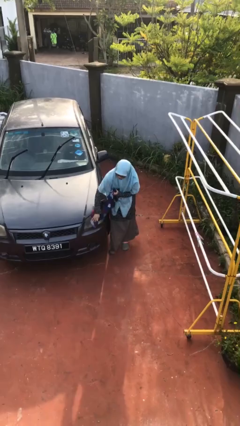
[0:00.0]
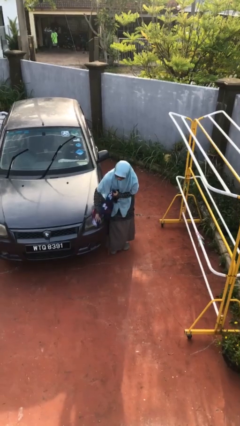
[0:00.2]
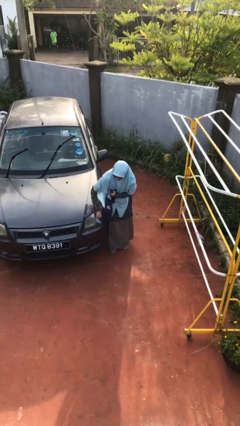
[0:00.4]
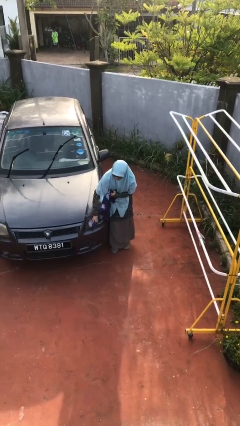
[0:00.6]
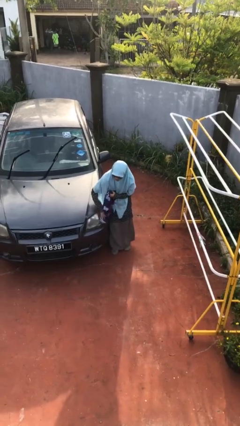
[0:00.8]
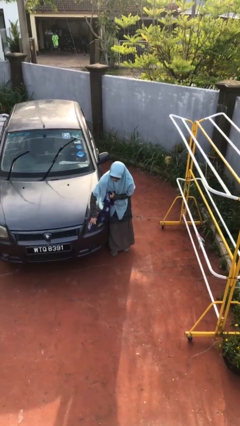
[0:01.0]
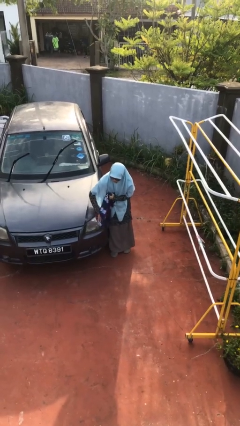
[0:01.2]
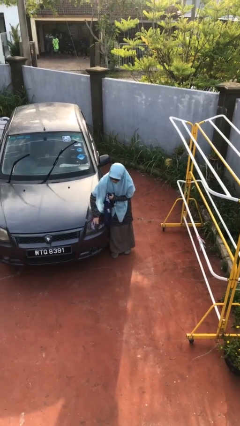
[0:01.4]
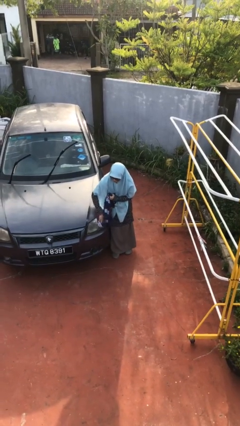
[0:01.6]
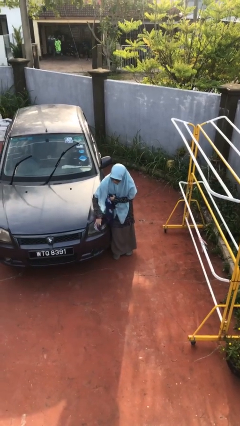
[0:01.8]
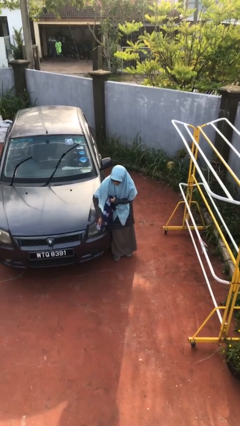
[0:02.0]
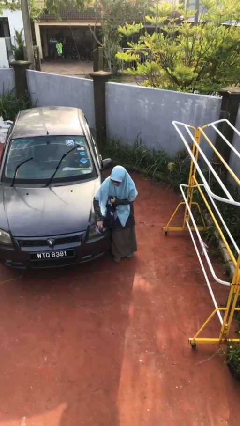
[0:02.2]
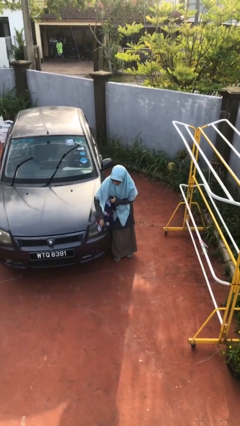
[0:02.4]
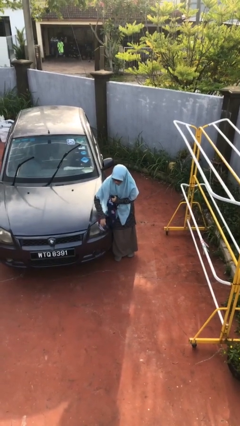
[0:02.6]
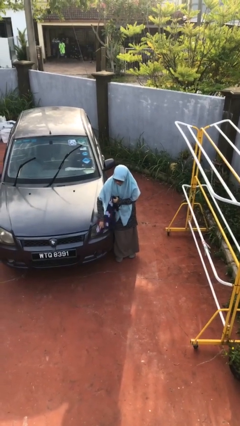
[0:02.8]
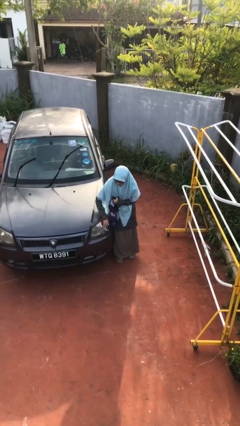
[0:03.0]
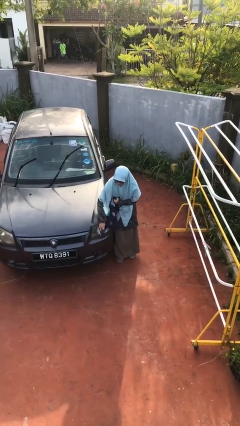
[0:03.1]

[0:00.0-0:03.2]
person polishes car with rag

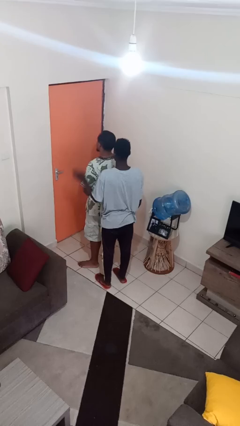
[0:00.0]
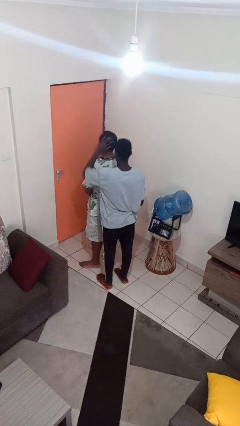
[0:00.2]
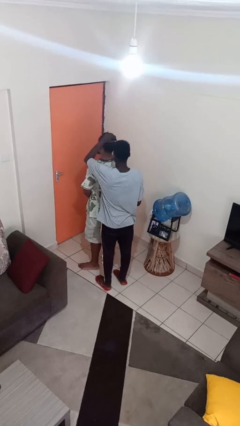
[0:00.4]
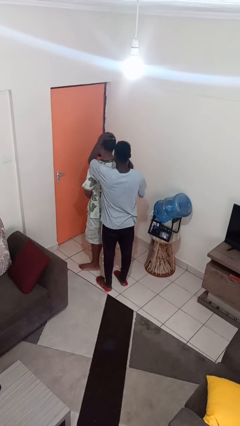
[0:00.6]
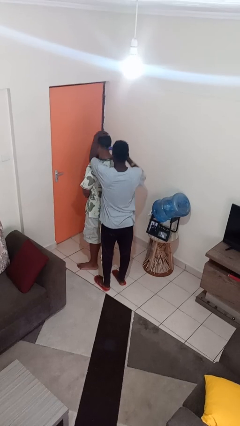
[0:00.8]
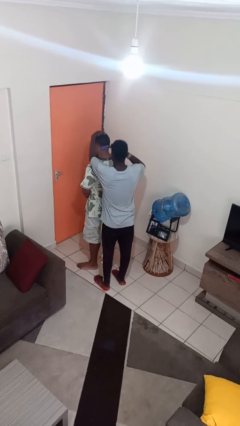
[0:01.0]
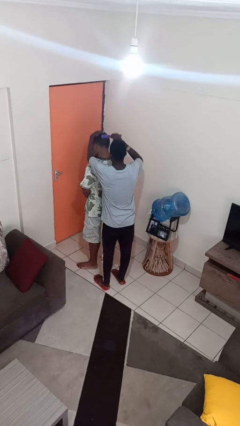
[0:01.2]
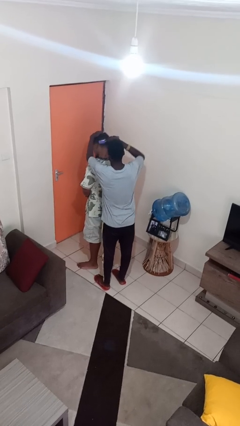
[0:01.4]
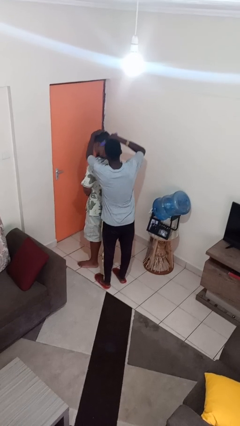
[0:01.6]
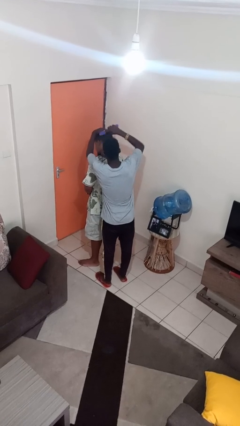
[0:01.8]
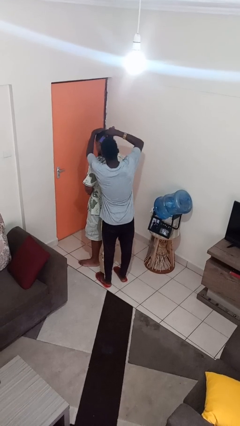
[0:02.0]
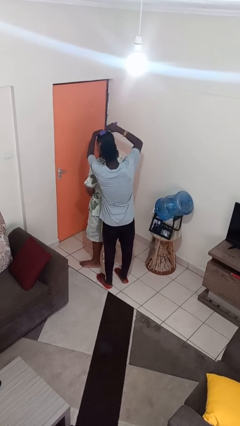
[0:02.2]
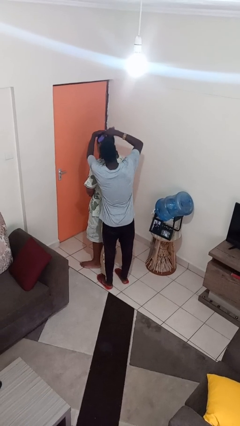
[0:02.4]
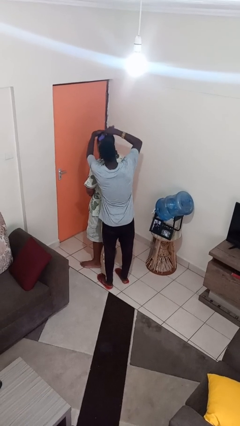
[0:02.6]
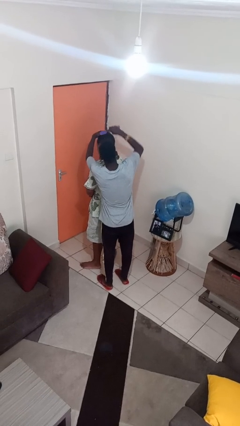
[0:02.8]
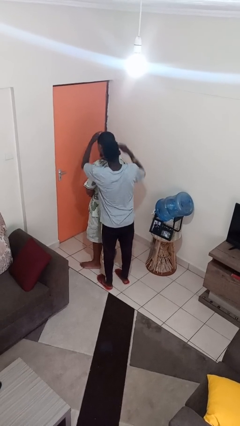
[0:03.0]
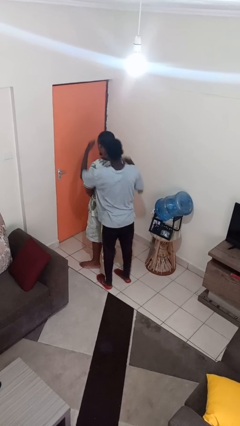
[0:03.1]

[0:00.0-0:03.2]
person brushes hair of person

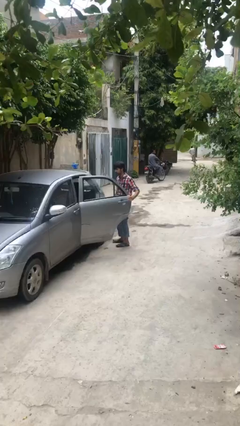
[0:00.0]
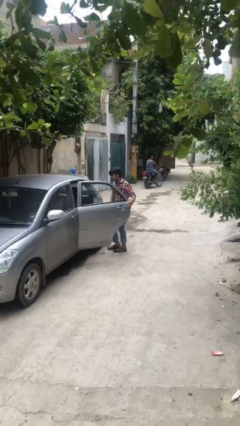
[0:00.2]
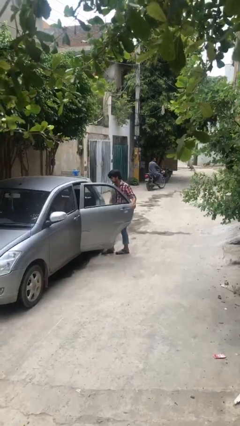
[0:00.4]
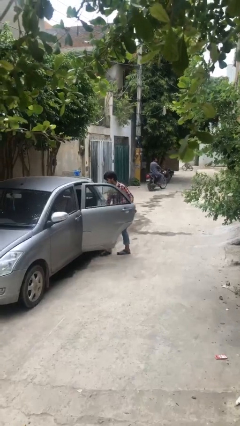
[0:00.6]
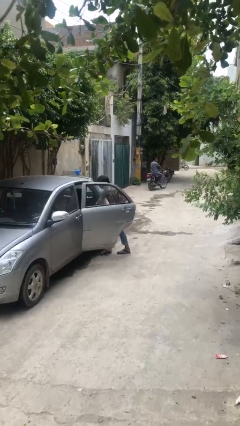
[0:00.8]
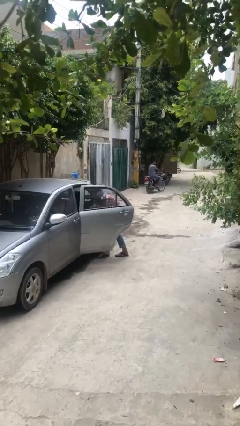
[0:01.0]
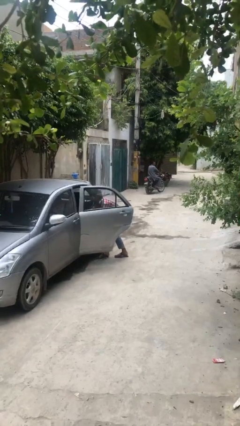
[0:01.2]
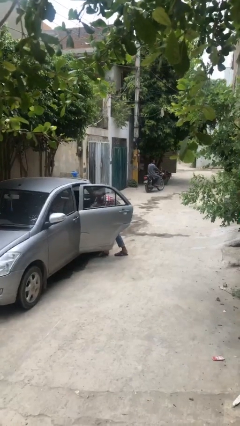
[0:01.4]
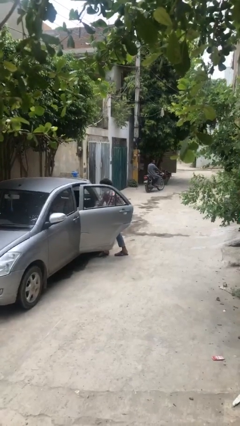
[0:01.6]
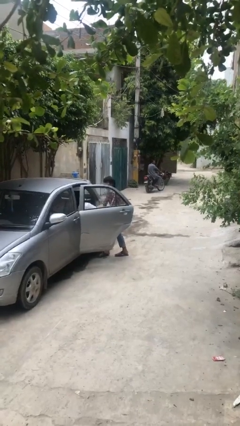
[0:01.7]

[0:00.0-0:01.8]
person unloads car

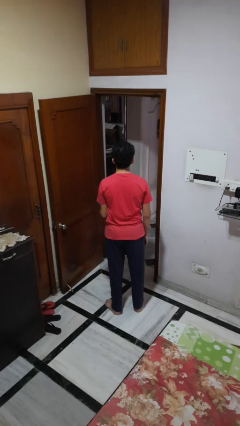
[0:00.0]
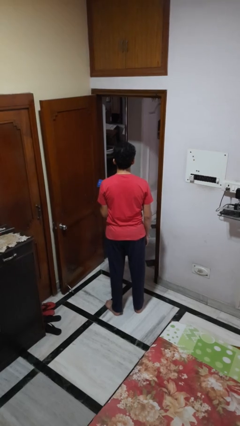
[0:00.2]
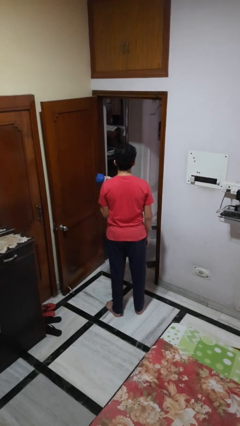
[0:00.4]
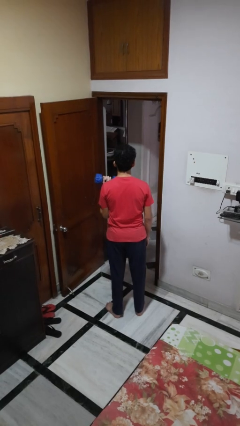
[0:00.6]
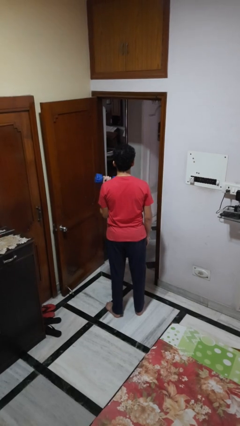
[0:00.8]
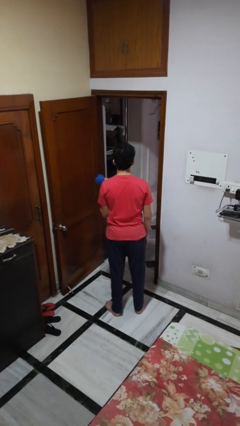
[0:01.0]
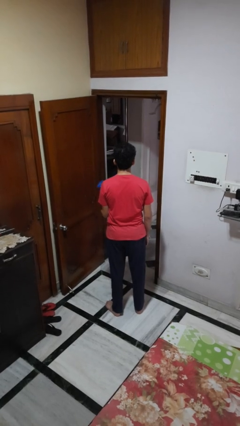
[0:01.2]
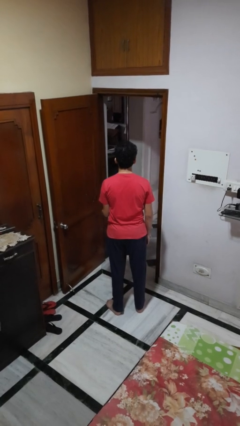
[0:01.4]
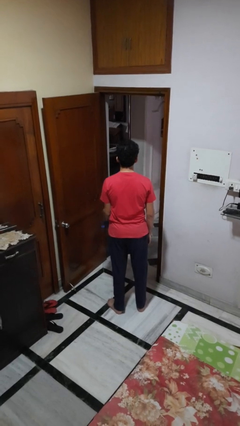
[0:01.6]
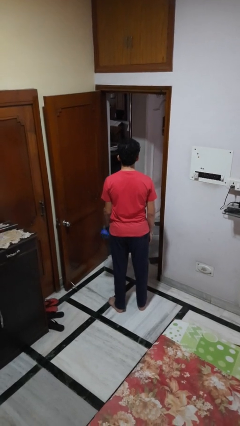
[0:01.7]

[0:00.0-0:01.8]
person lifts dumbbells

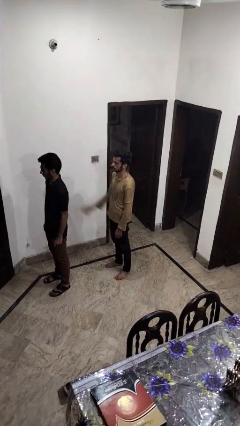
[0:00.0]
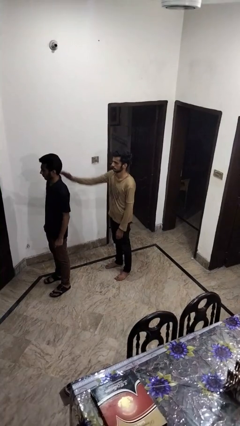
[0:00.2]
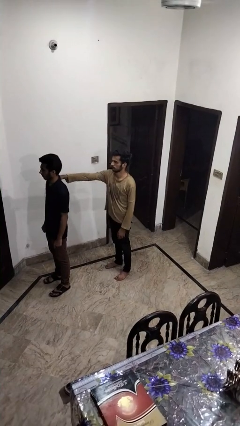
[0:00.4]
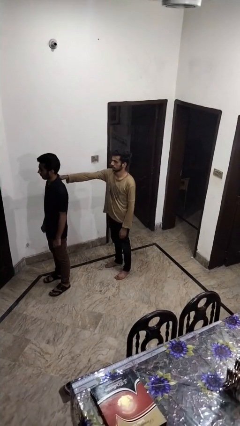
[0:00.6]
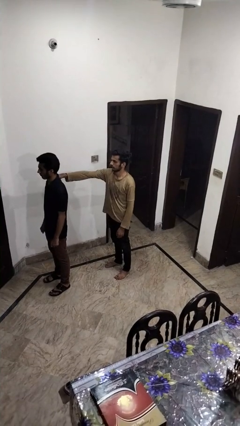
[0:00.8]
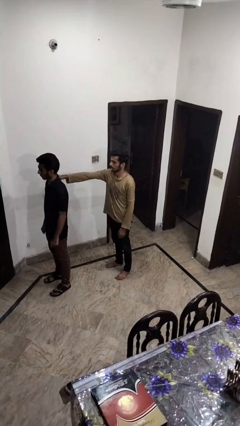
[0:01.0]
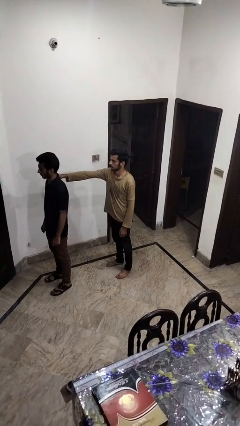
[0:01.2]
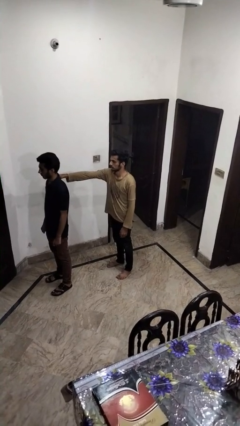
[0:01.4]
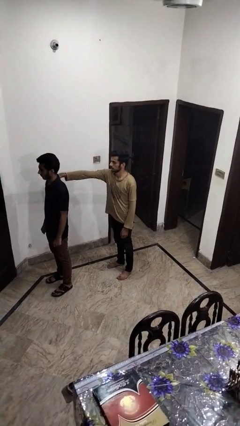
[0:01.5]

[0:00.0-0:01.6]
person grabs person by shoulder

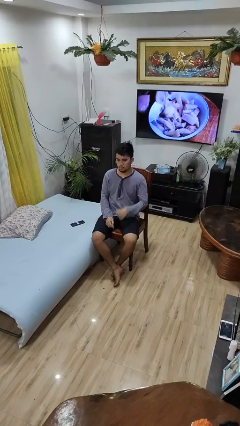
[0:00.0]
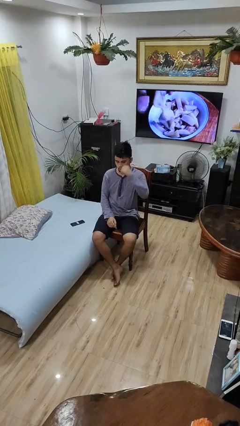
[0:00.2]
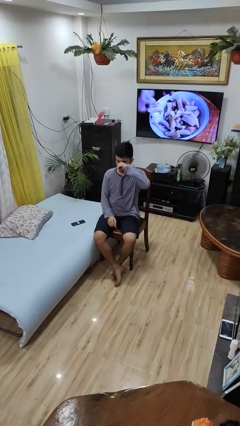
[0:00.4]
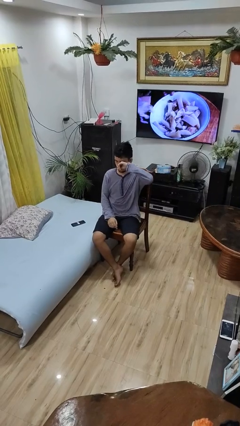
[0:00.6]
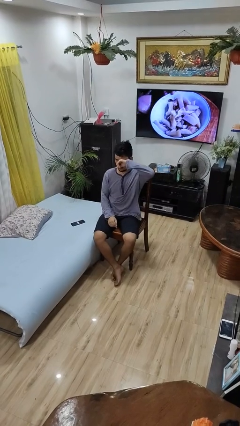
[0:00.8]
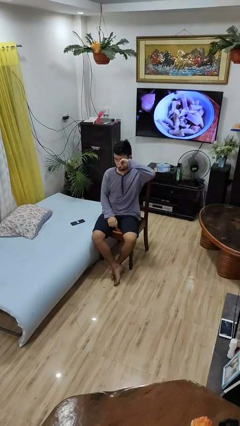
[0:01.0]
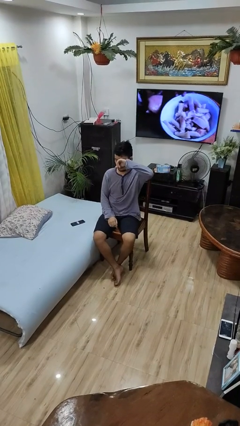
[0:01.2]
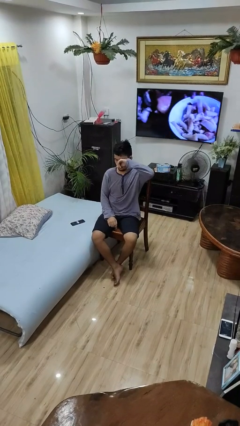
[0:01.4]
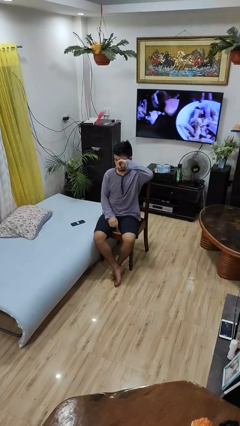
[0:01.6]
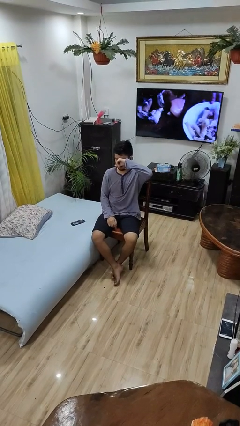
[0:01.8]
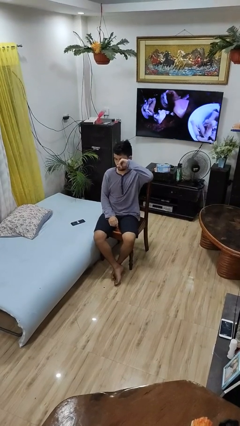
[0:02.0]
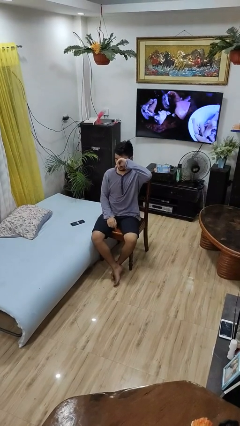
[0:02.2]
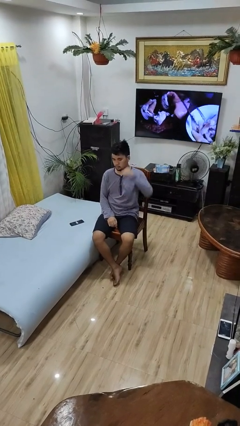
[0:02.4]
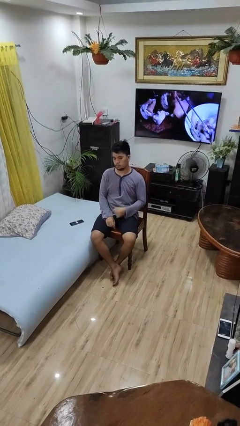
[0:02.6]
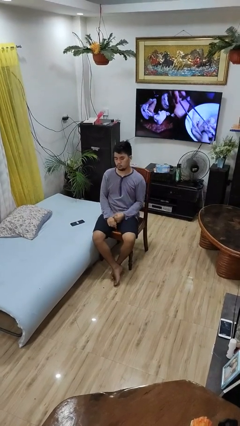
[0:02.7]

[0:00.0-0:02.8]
person rubs eyes

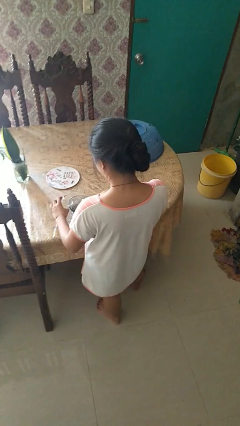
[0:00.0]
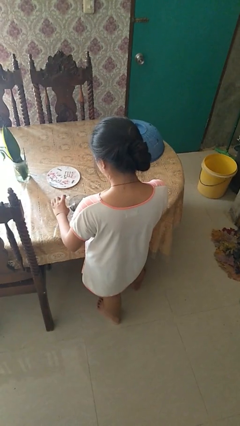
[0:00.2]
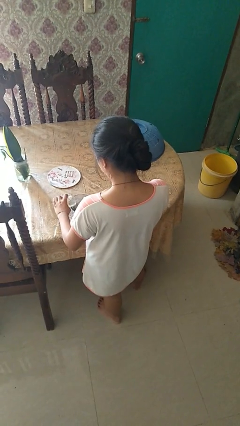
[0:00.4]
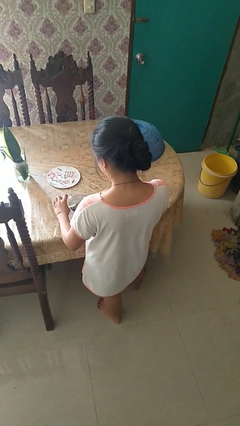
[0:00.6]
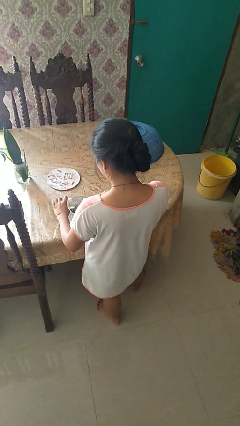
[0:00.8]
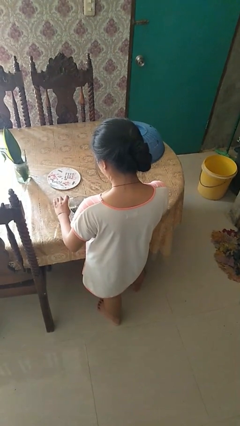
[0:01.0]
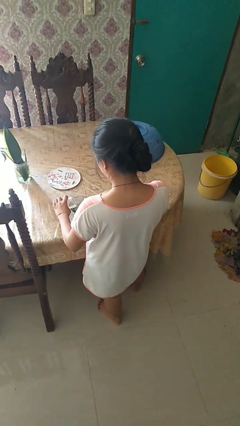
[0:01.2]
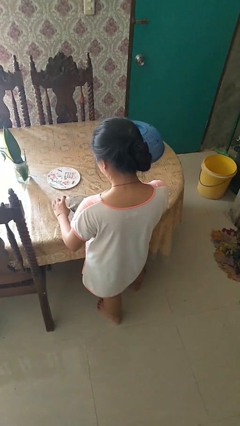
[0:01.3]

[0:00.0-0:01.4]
person pours into bowl

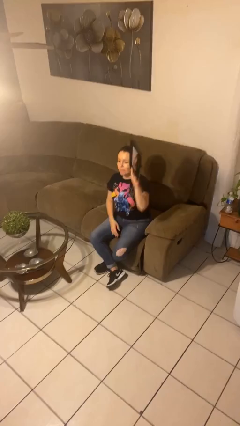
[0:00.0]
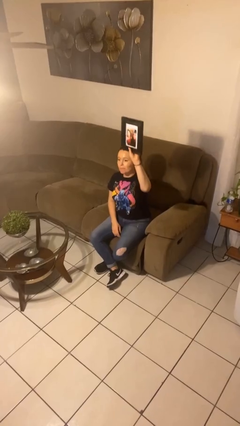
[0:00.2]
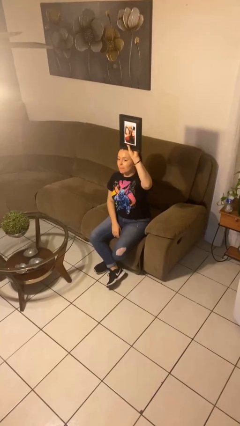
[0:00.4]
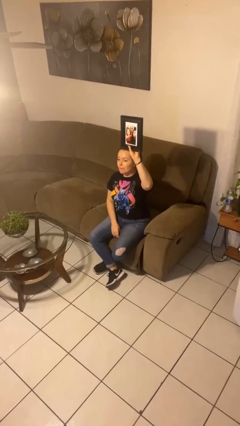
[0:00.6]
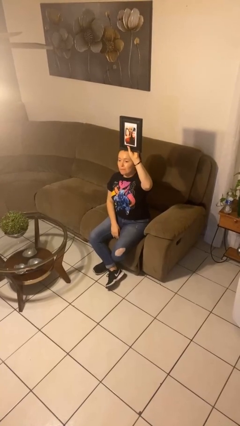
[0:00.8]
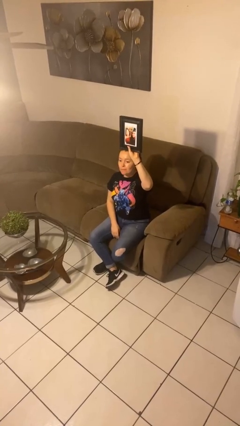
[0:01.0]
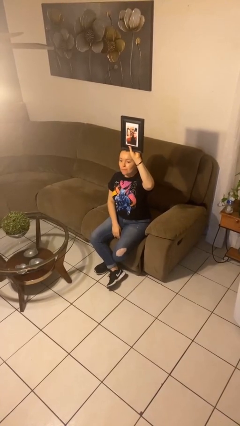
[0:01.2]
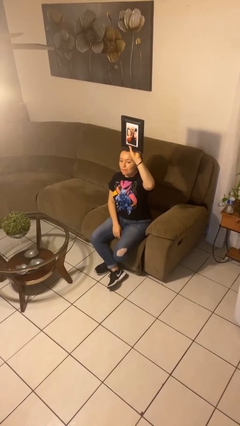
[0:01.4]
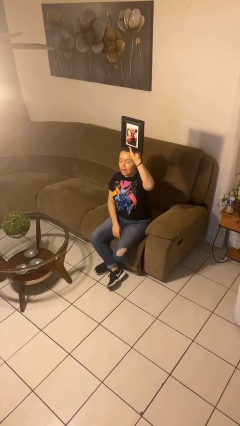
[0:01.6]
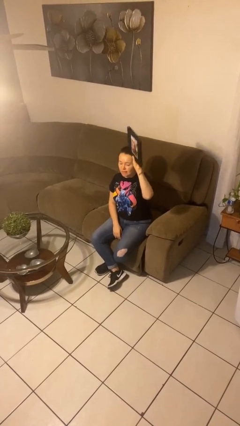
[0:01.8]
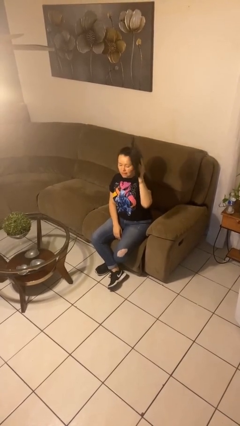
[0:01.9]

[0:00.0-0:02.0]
person holds object above head
